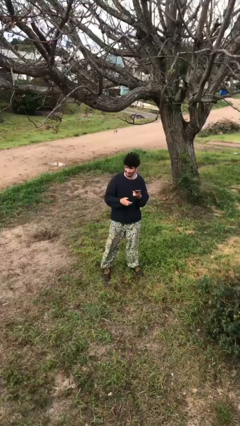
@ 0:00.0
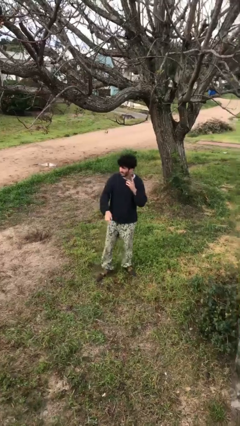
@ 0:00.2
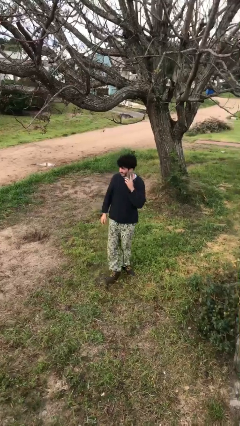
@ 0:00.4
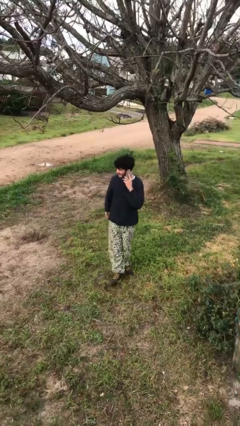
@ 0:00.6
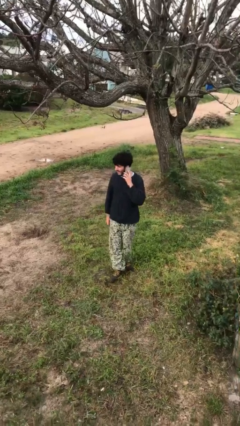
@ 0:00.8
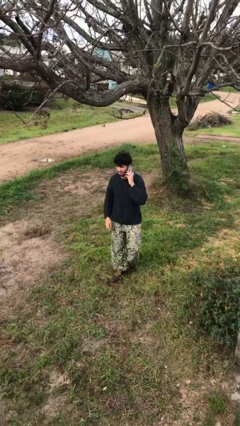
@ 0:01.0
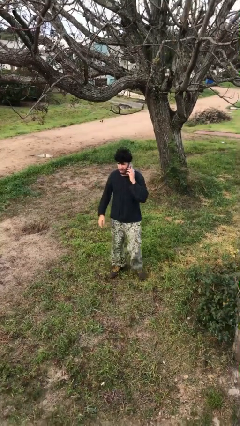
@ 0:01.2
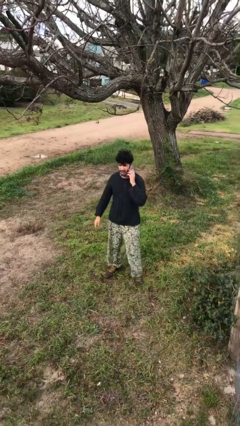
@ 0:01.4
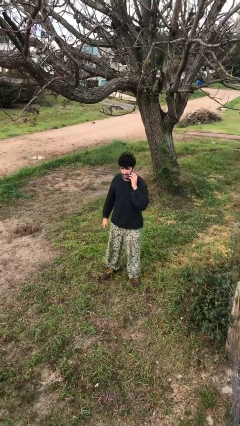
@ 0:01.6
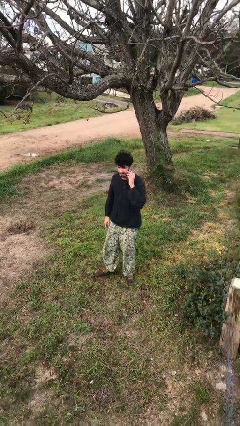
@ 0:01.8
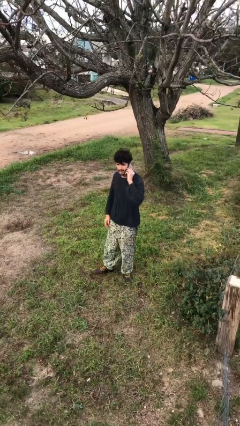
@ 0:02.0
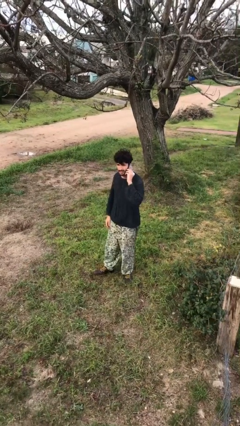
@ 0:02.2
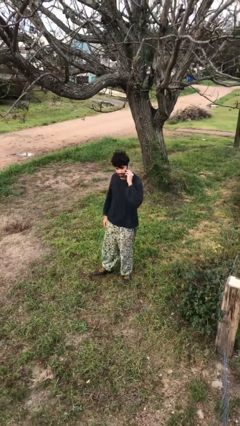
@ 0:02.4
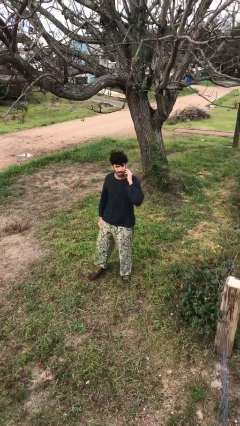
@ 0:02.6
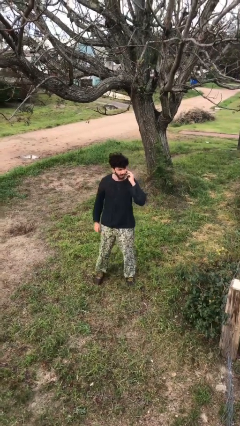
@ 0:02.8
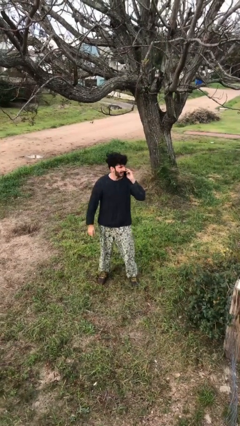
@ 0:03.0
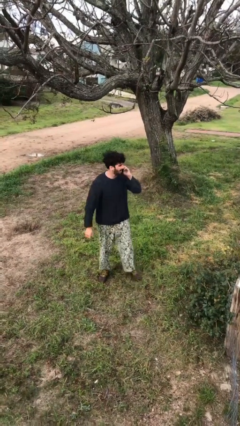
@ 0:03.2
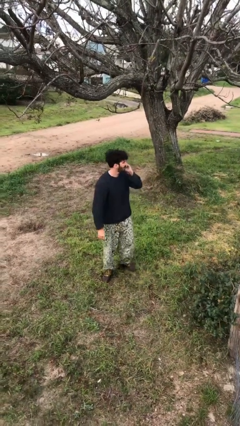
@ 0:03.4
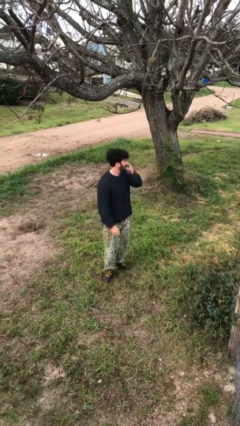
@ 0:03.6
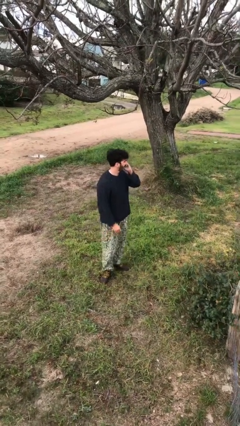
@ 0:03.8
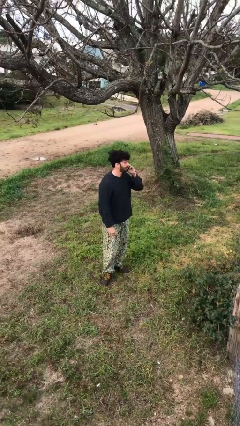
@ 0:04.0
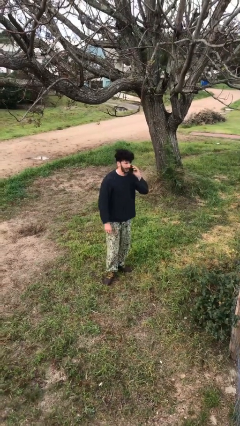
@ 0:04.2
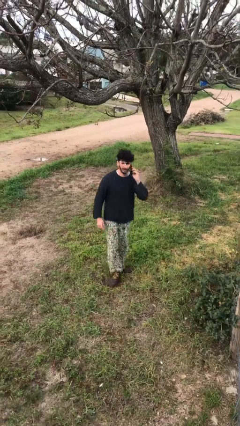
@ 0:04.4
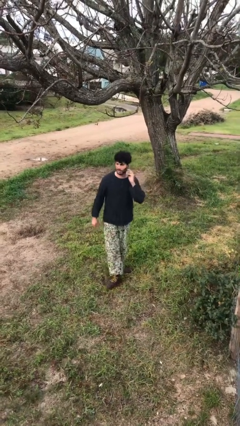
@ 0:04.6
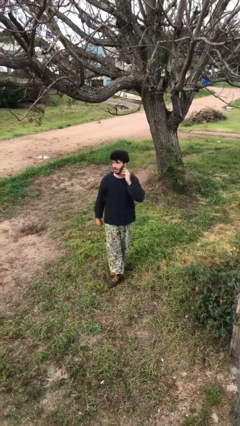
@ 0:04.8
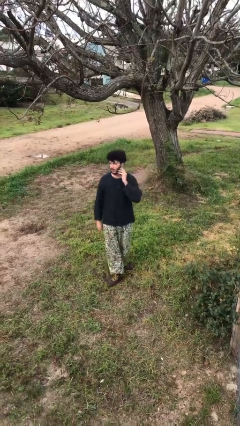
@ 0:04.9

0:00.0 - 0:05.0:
person talks on phone

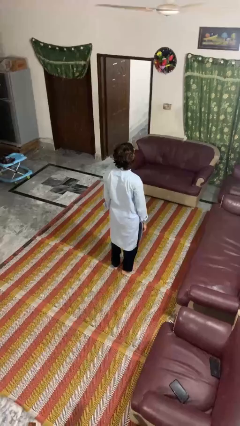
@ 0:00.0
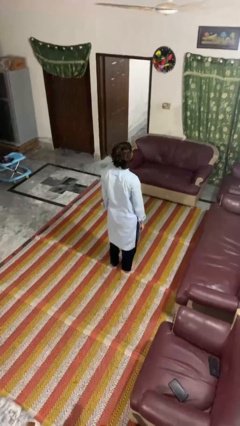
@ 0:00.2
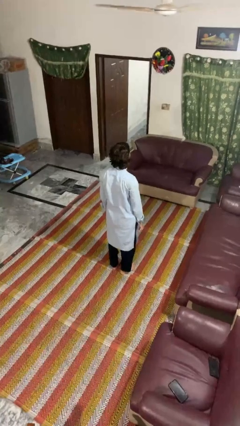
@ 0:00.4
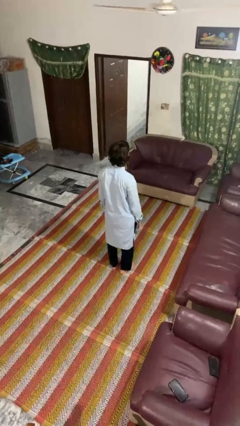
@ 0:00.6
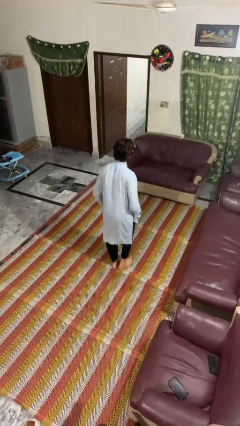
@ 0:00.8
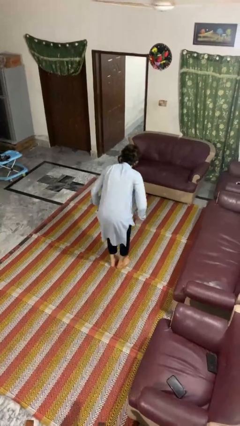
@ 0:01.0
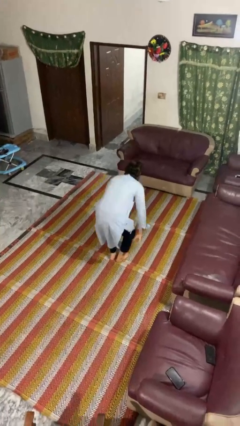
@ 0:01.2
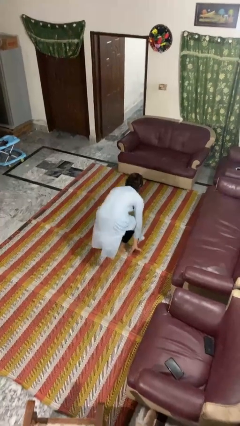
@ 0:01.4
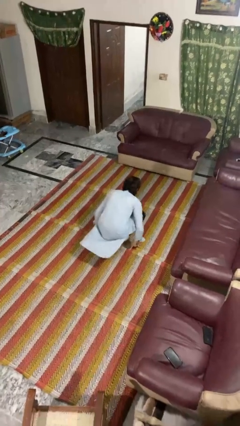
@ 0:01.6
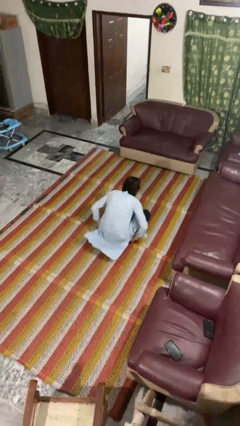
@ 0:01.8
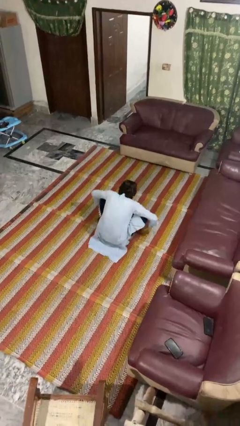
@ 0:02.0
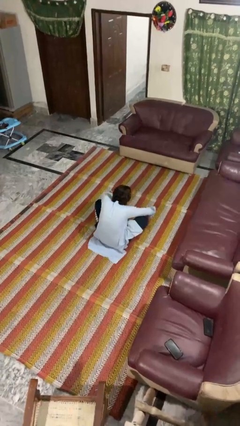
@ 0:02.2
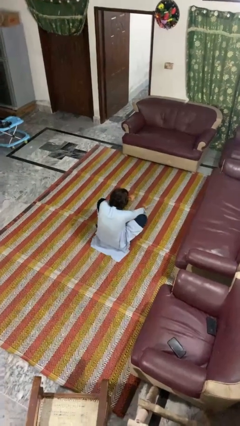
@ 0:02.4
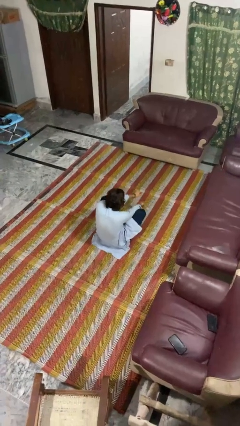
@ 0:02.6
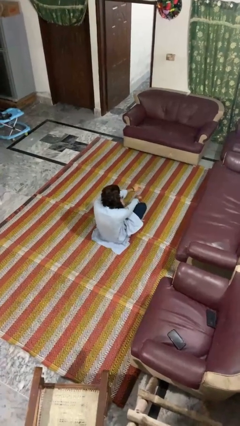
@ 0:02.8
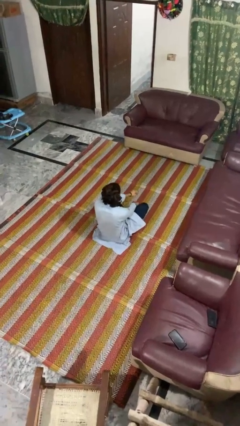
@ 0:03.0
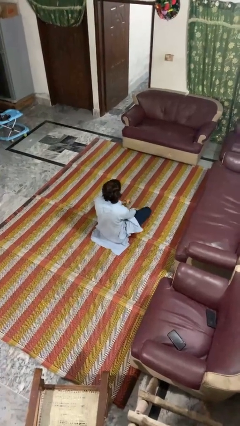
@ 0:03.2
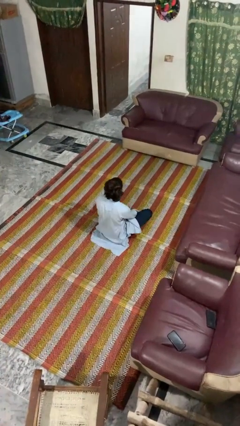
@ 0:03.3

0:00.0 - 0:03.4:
person sits crisscross

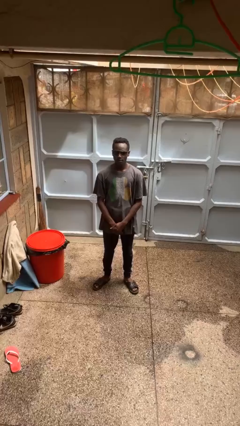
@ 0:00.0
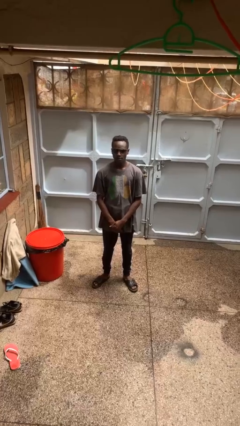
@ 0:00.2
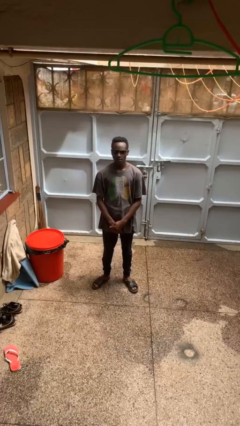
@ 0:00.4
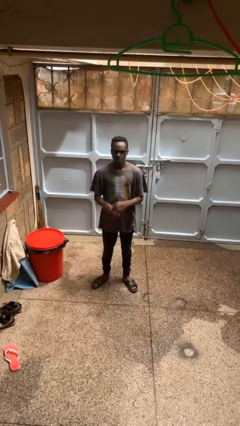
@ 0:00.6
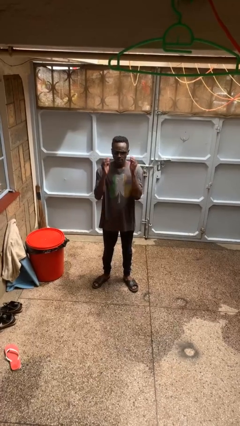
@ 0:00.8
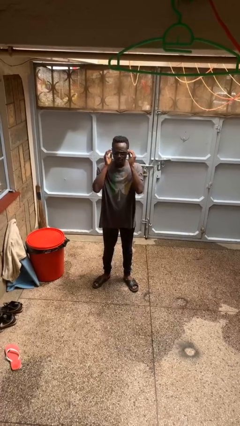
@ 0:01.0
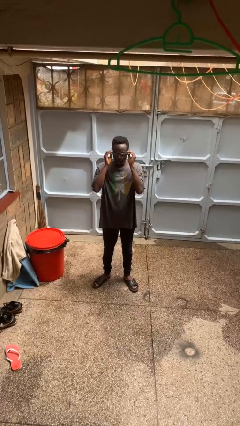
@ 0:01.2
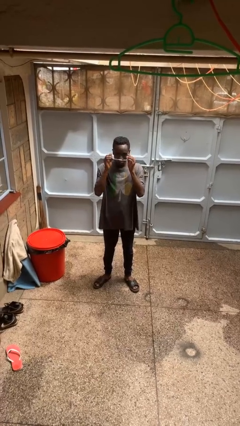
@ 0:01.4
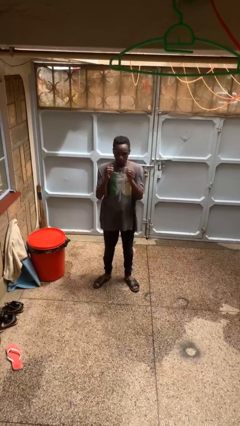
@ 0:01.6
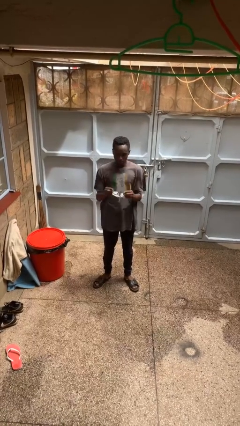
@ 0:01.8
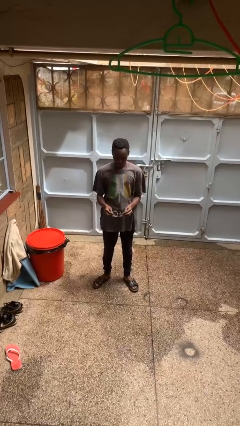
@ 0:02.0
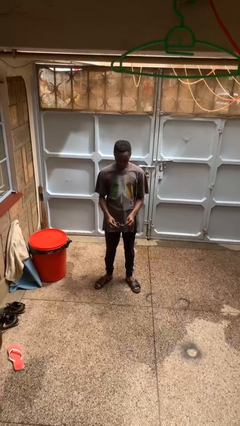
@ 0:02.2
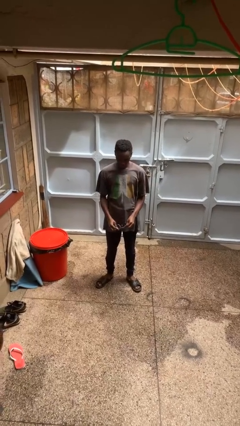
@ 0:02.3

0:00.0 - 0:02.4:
person takes off sunglasses

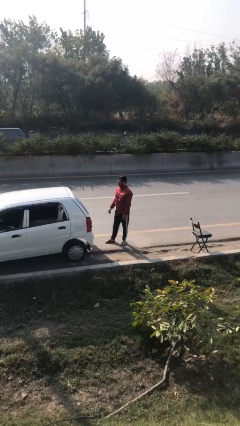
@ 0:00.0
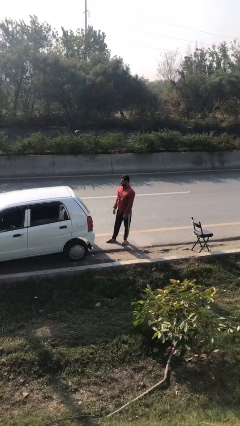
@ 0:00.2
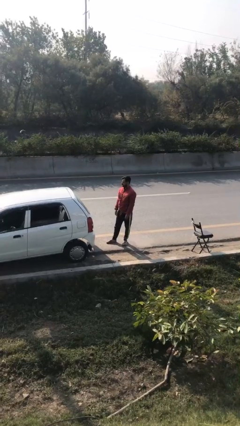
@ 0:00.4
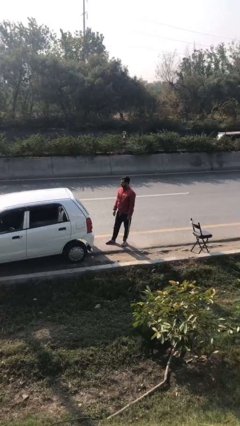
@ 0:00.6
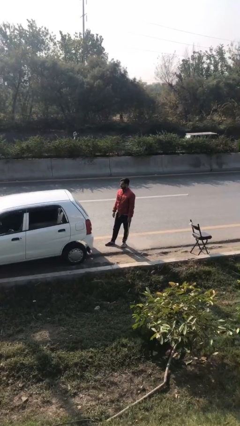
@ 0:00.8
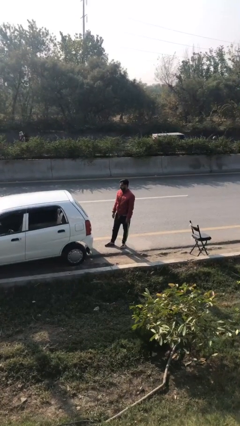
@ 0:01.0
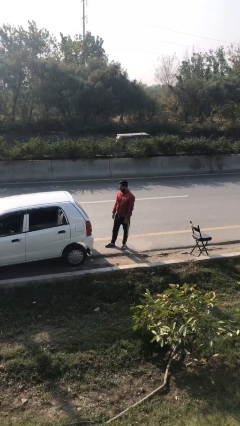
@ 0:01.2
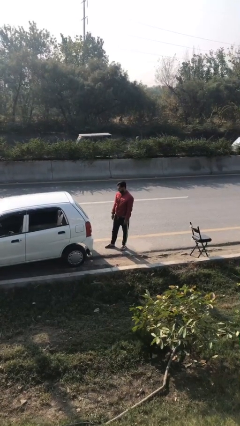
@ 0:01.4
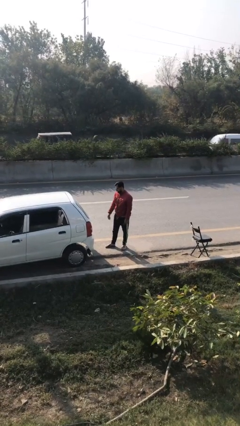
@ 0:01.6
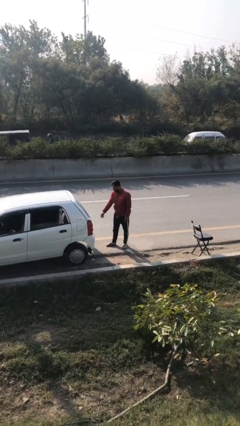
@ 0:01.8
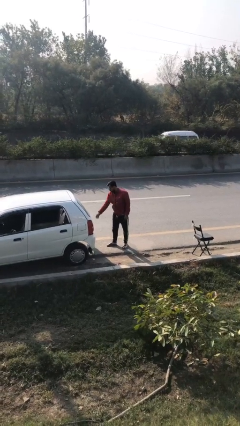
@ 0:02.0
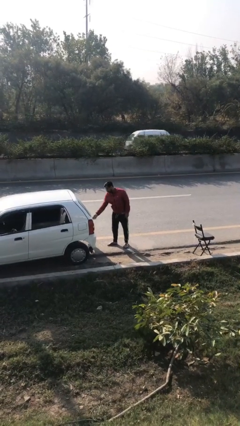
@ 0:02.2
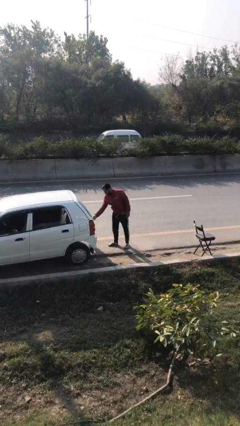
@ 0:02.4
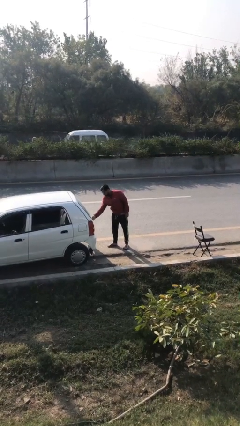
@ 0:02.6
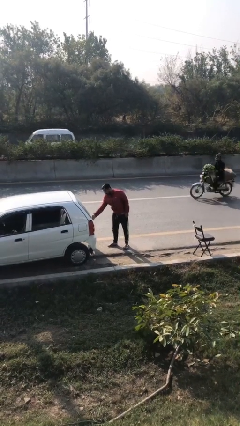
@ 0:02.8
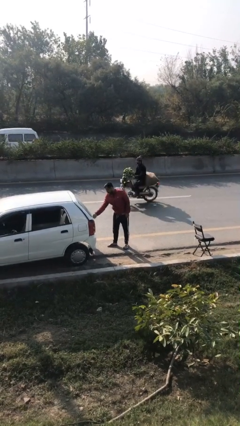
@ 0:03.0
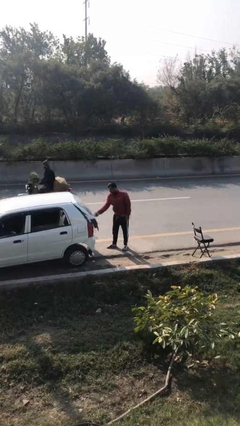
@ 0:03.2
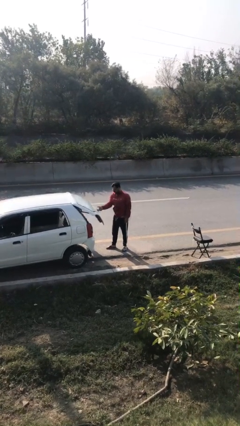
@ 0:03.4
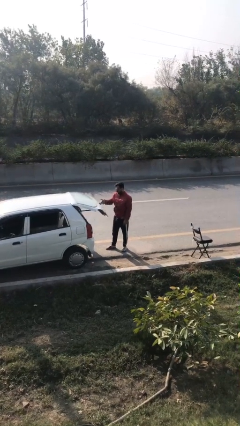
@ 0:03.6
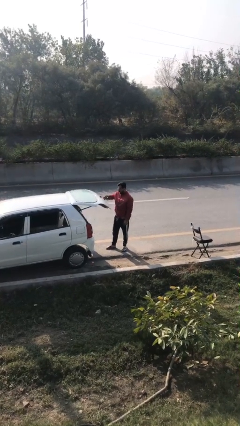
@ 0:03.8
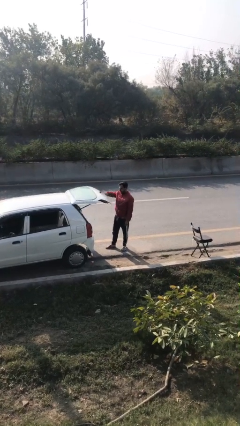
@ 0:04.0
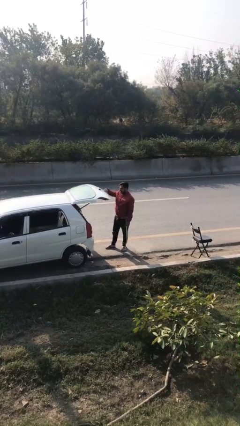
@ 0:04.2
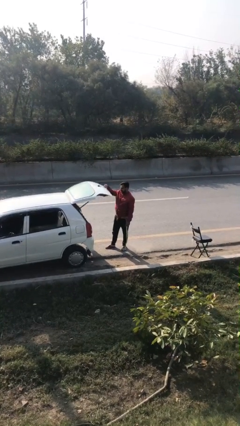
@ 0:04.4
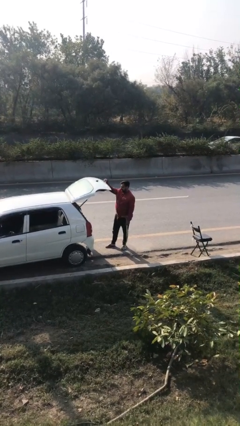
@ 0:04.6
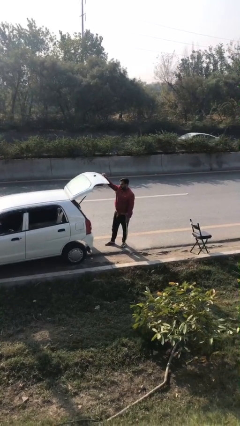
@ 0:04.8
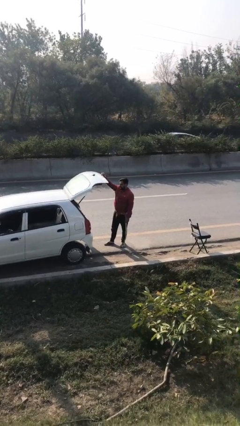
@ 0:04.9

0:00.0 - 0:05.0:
person opens car trunk

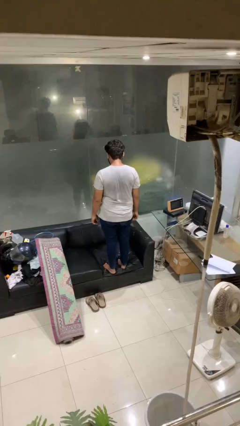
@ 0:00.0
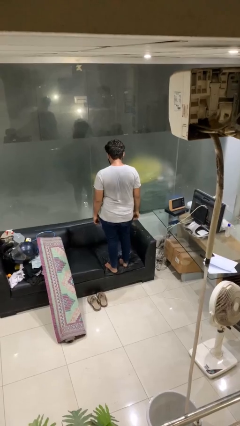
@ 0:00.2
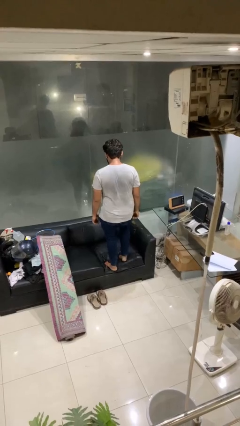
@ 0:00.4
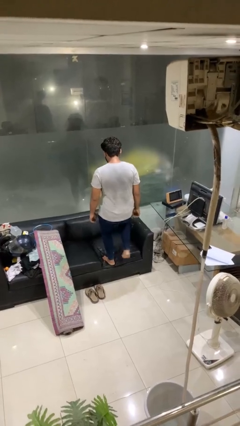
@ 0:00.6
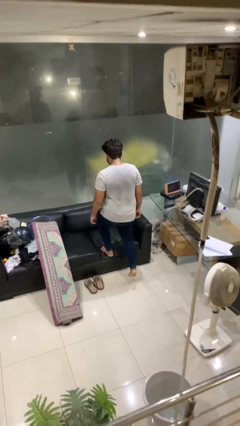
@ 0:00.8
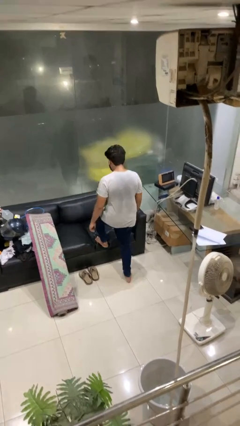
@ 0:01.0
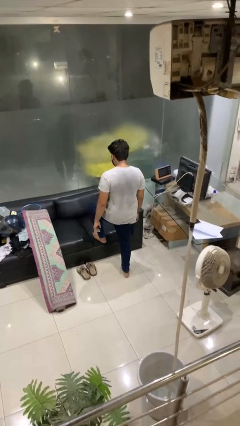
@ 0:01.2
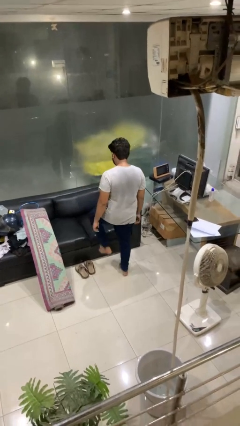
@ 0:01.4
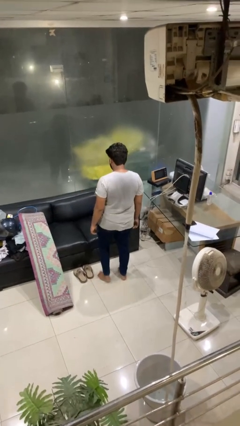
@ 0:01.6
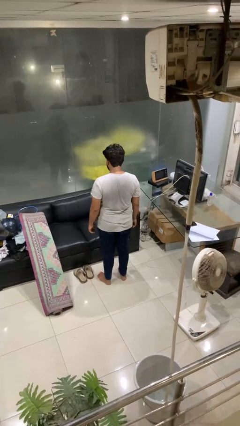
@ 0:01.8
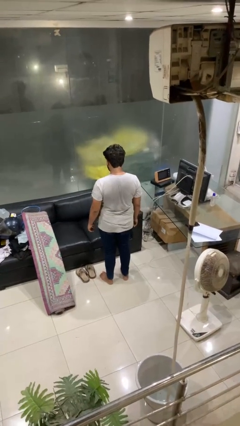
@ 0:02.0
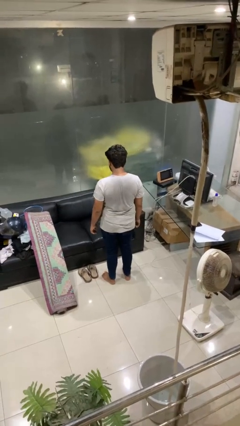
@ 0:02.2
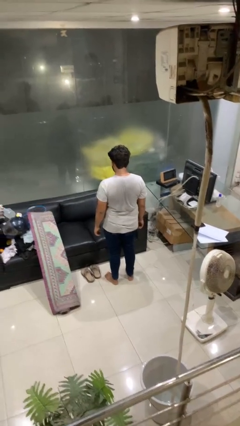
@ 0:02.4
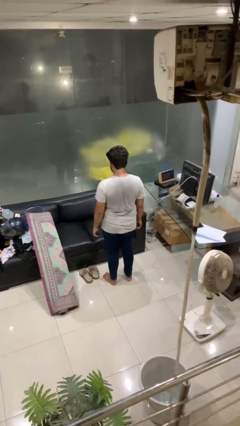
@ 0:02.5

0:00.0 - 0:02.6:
person climbs off couch
